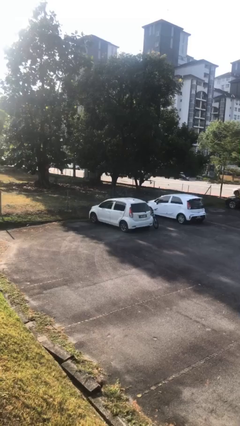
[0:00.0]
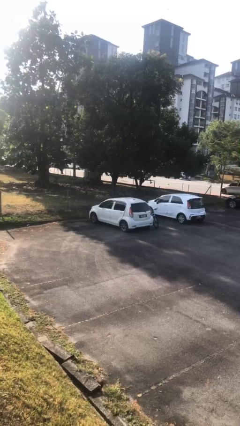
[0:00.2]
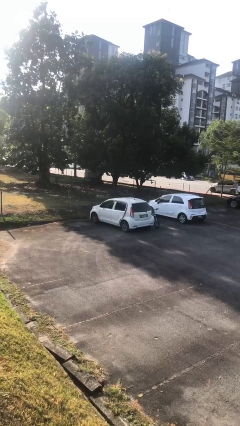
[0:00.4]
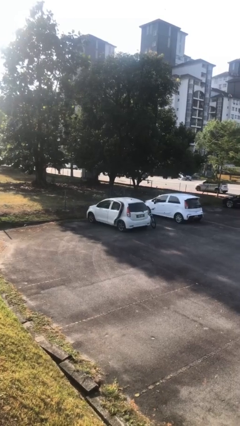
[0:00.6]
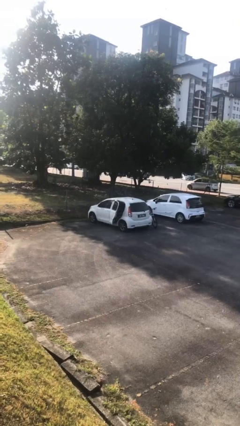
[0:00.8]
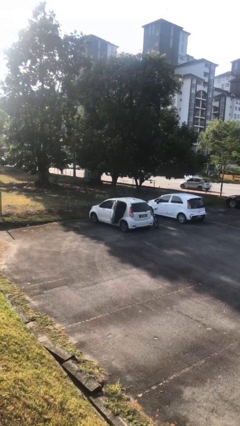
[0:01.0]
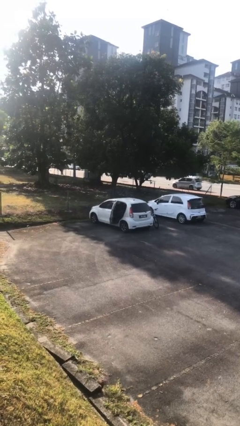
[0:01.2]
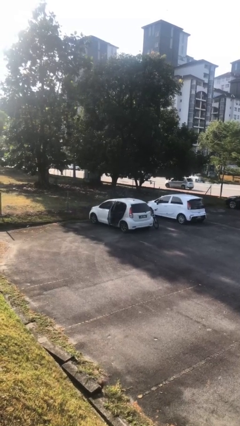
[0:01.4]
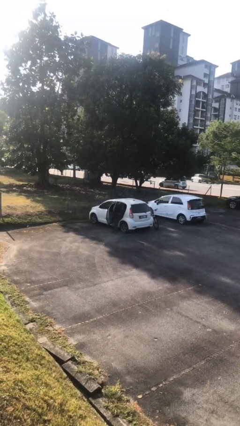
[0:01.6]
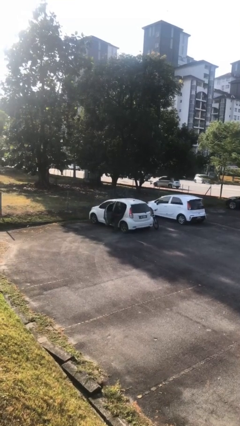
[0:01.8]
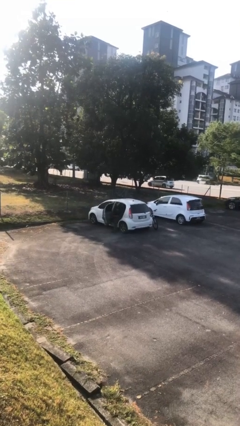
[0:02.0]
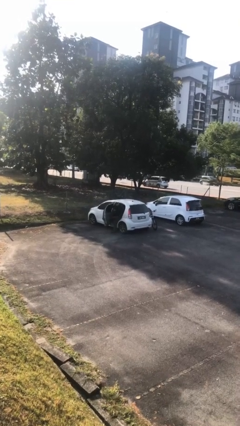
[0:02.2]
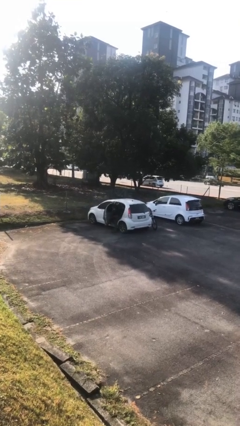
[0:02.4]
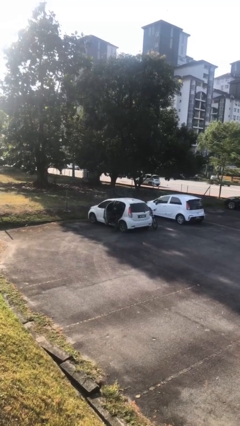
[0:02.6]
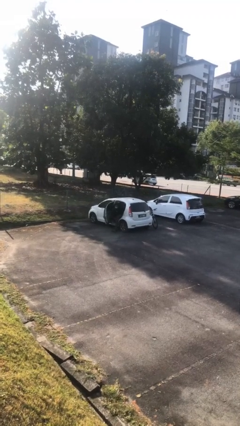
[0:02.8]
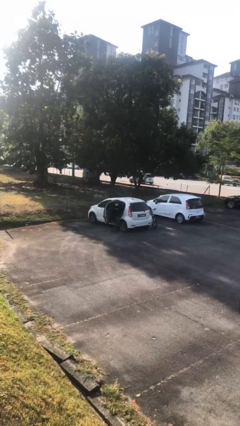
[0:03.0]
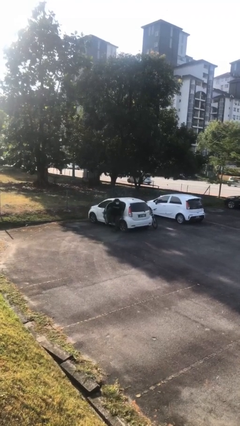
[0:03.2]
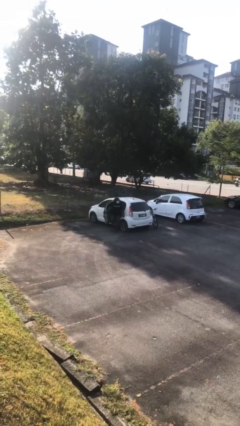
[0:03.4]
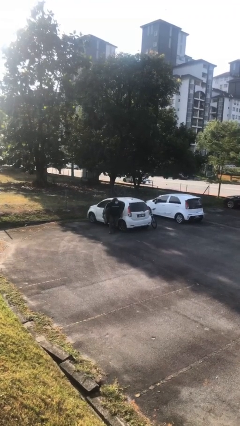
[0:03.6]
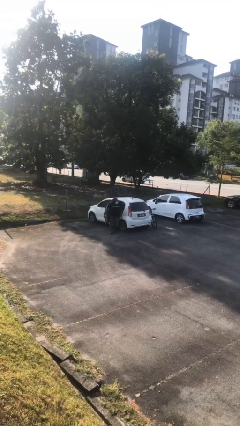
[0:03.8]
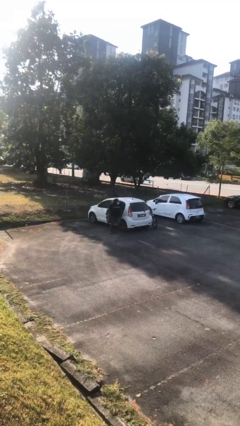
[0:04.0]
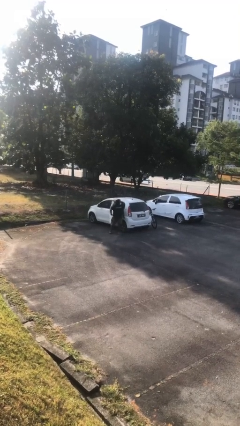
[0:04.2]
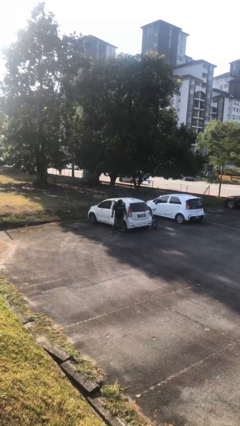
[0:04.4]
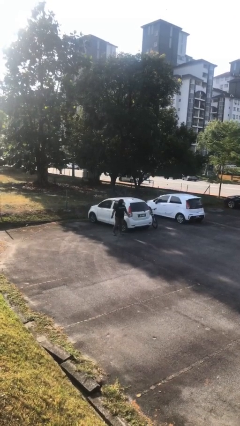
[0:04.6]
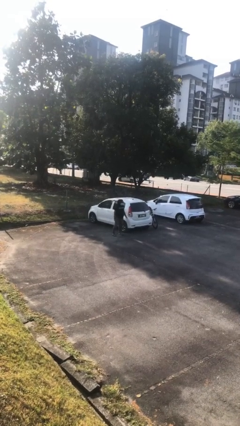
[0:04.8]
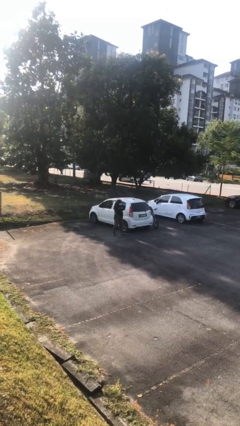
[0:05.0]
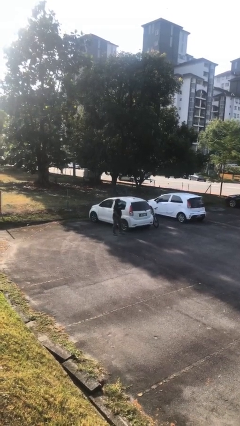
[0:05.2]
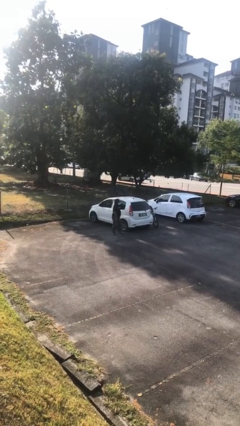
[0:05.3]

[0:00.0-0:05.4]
car drops off person

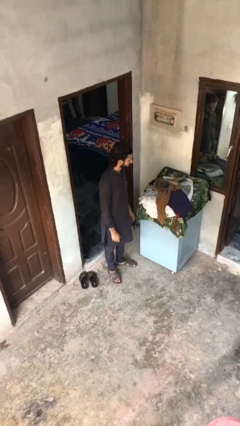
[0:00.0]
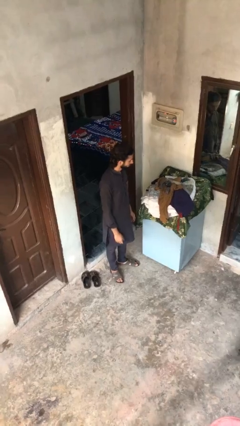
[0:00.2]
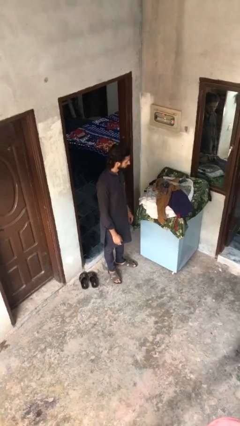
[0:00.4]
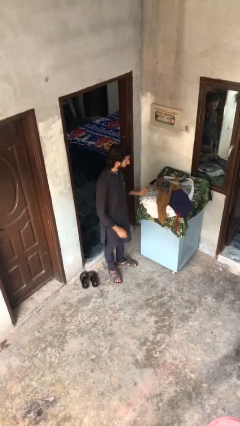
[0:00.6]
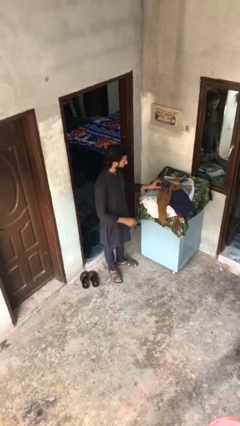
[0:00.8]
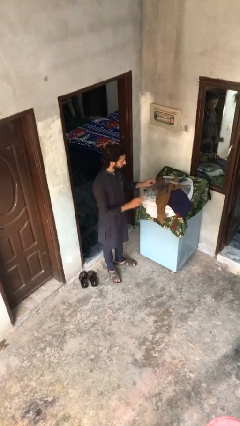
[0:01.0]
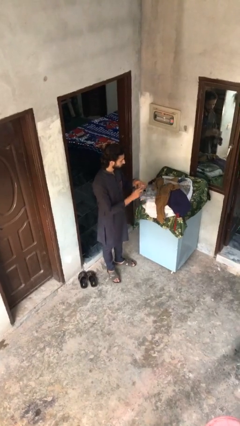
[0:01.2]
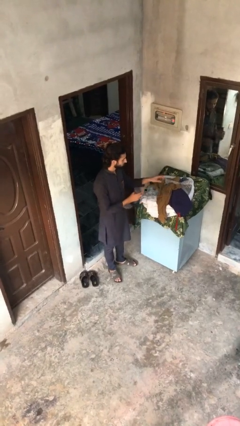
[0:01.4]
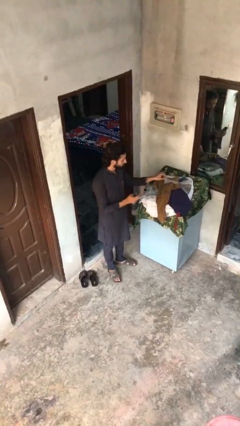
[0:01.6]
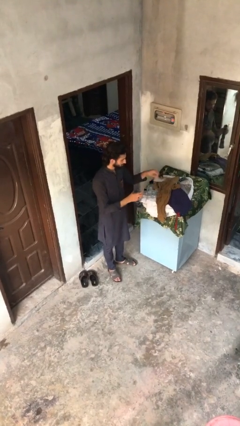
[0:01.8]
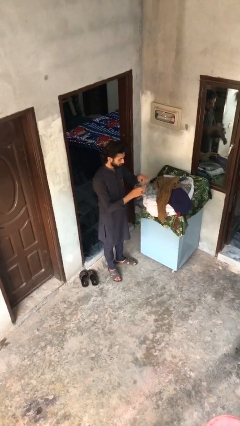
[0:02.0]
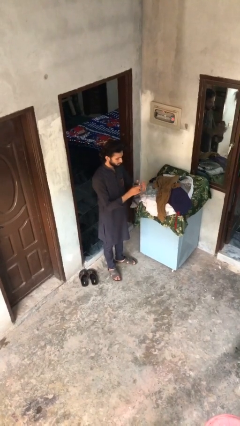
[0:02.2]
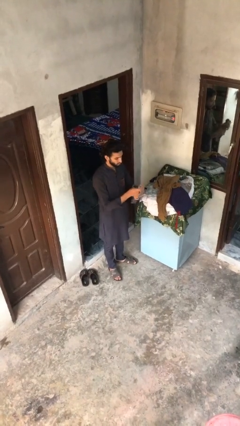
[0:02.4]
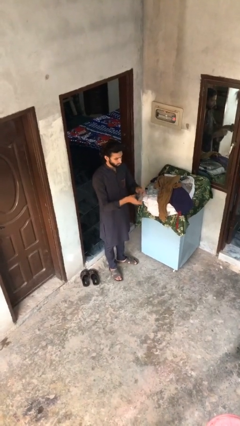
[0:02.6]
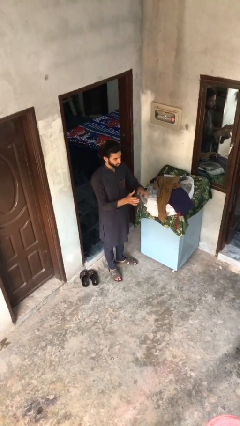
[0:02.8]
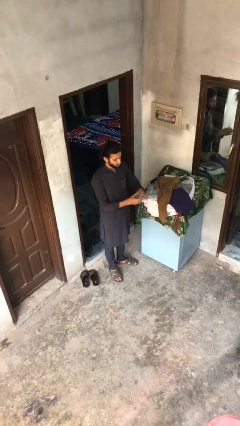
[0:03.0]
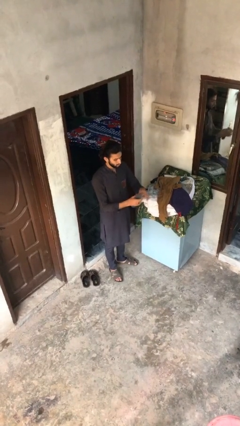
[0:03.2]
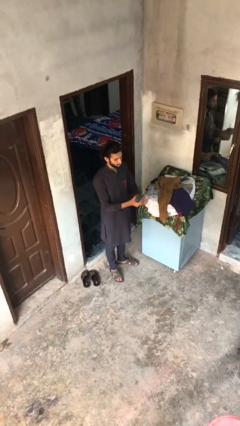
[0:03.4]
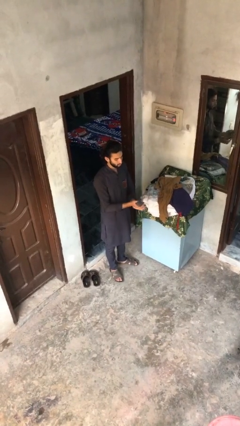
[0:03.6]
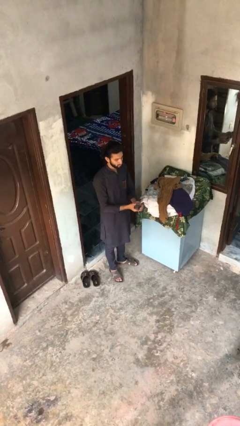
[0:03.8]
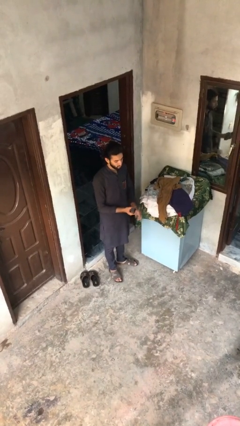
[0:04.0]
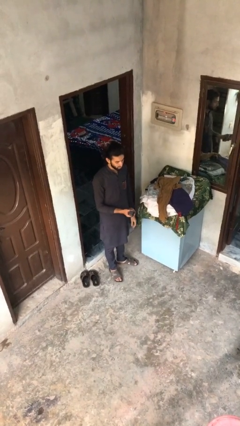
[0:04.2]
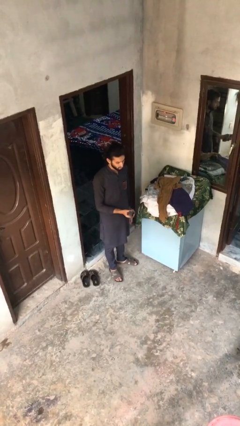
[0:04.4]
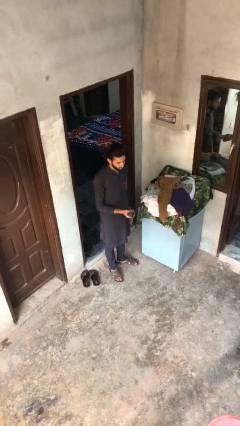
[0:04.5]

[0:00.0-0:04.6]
person folds socks

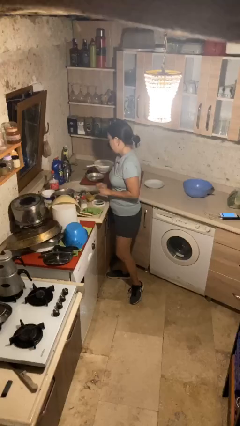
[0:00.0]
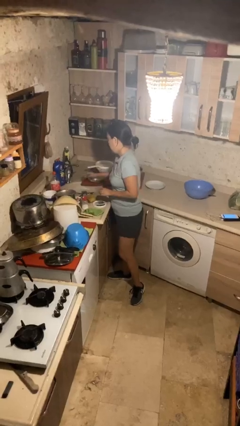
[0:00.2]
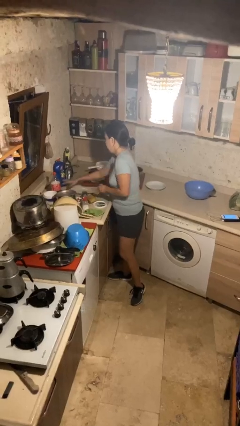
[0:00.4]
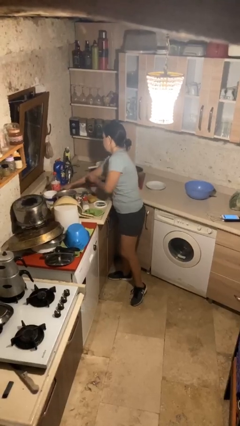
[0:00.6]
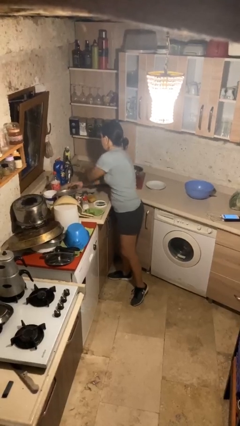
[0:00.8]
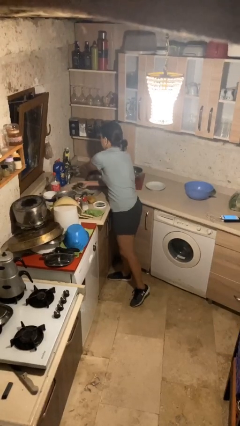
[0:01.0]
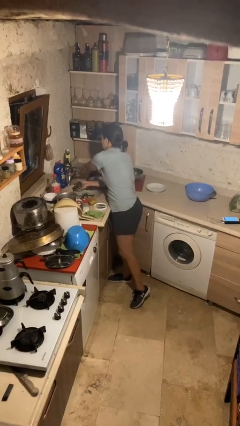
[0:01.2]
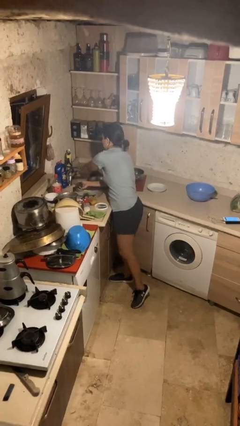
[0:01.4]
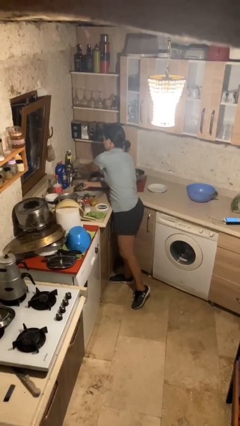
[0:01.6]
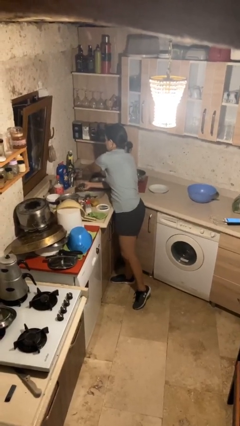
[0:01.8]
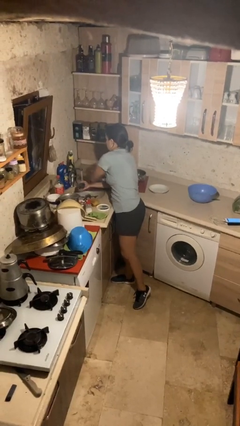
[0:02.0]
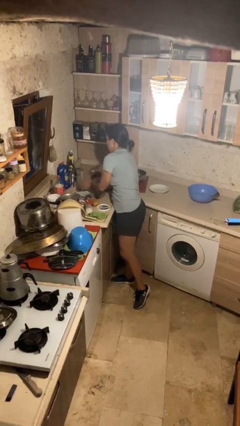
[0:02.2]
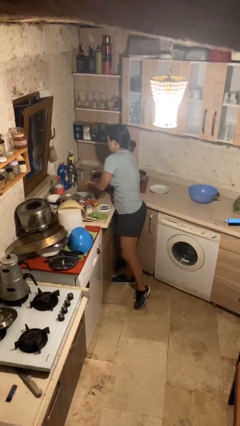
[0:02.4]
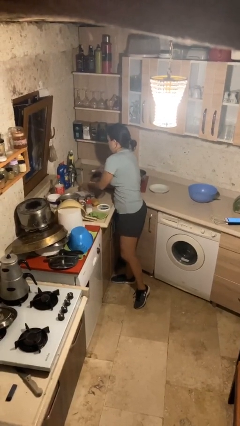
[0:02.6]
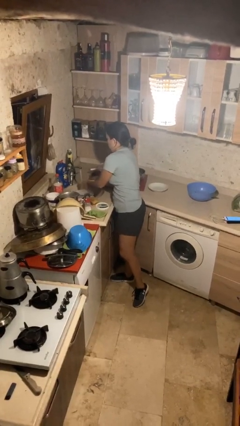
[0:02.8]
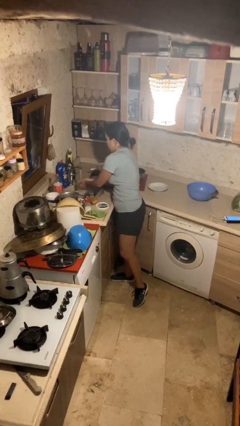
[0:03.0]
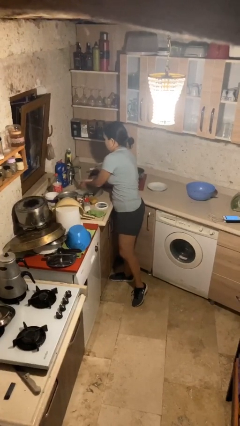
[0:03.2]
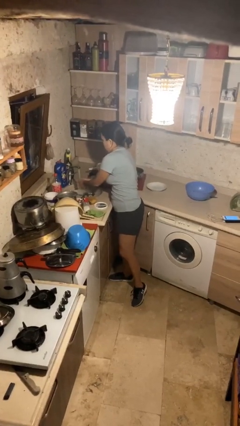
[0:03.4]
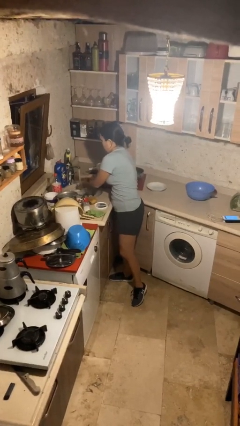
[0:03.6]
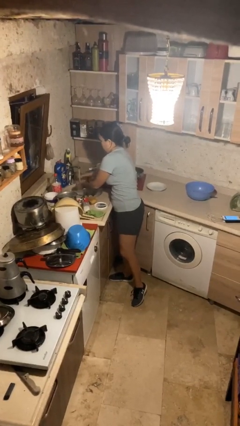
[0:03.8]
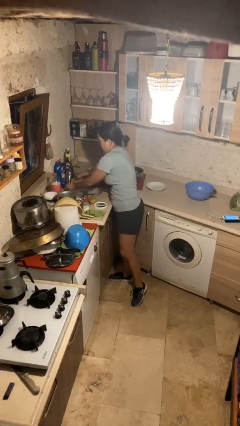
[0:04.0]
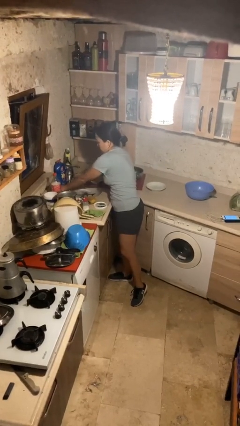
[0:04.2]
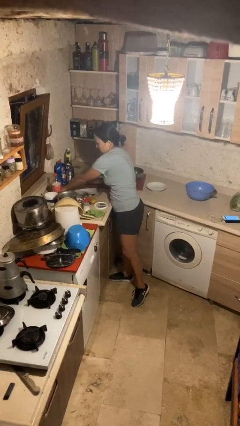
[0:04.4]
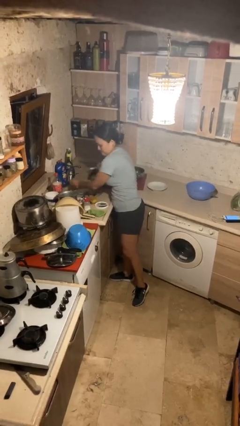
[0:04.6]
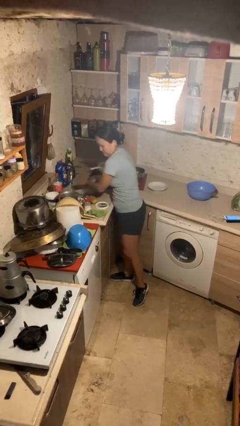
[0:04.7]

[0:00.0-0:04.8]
person washes hands

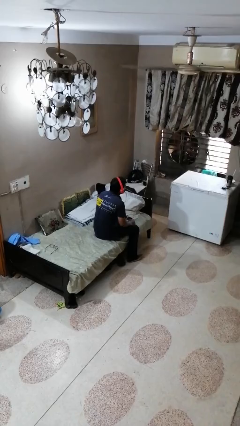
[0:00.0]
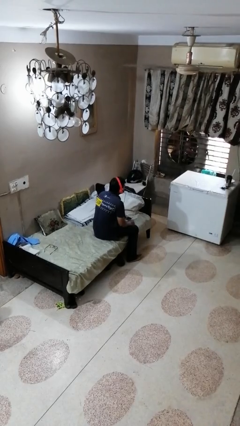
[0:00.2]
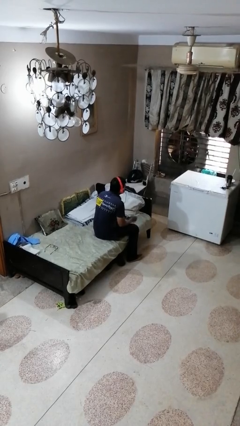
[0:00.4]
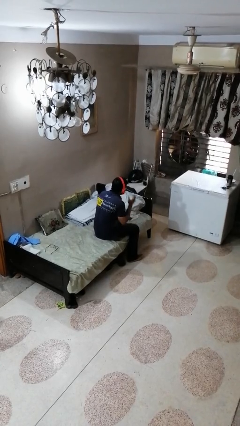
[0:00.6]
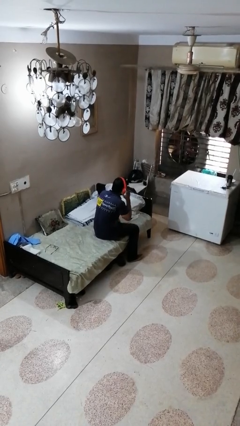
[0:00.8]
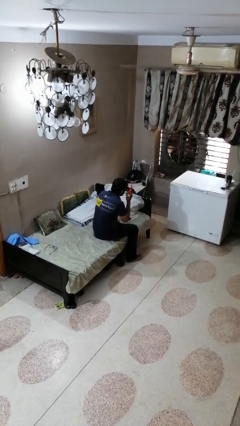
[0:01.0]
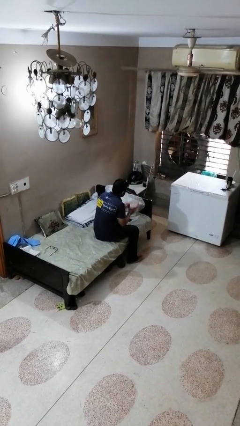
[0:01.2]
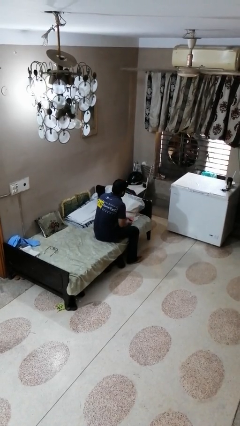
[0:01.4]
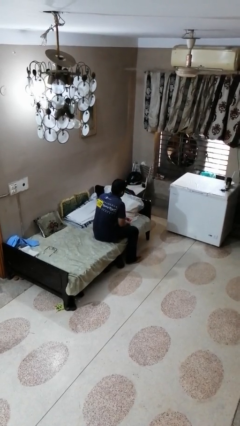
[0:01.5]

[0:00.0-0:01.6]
person takes off headphones

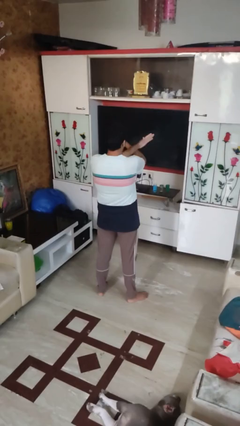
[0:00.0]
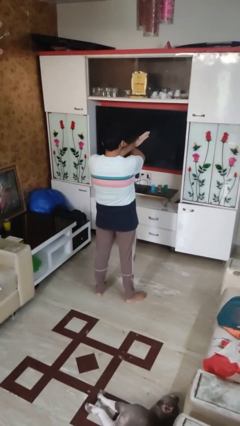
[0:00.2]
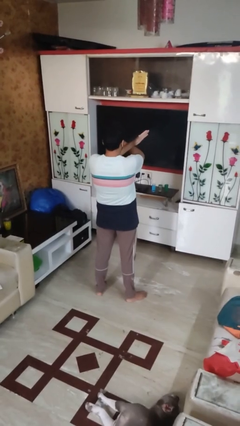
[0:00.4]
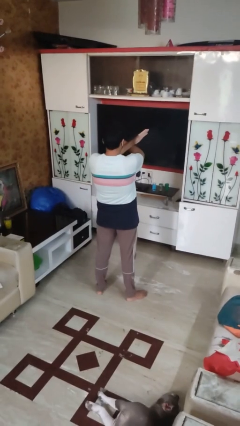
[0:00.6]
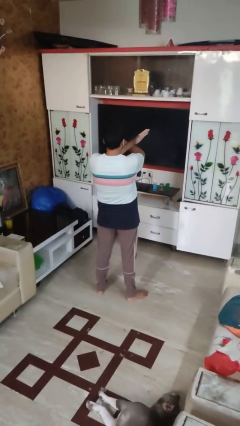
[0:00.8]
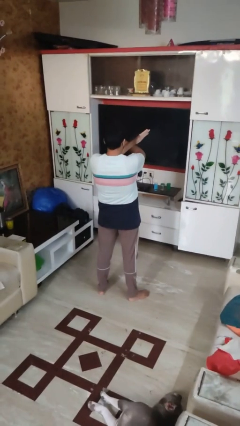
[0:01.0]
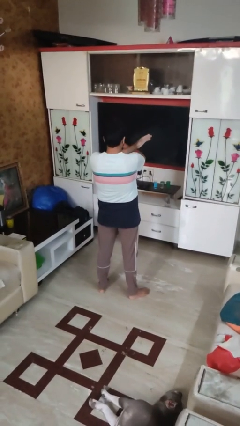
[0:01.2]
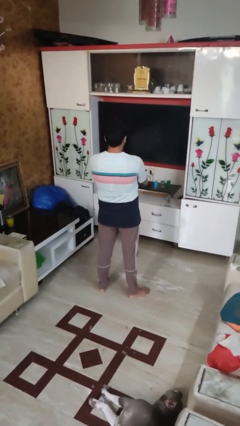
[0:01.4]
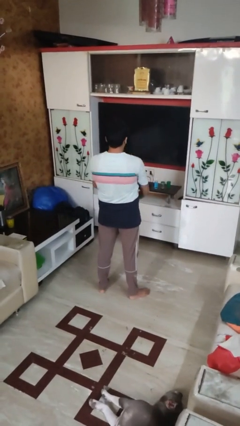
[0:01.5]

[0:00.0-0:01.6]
person gestures arms x
